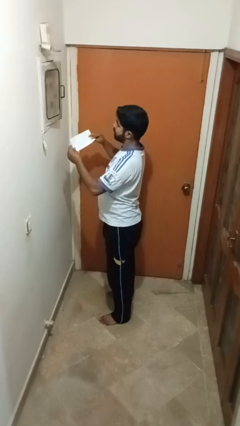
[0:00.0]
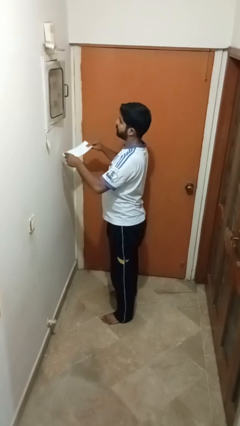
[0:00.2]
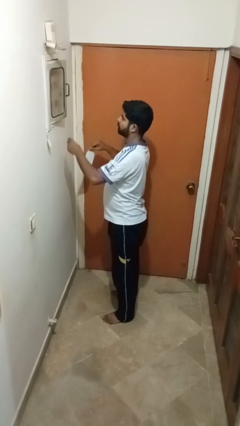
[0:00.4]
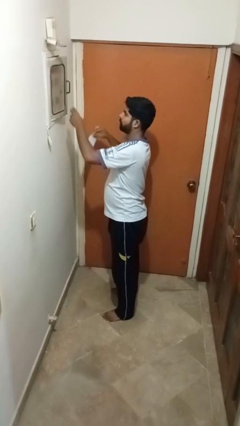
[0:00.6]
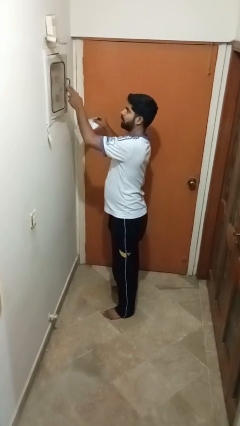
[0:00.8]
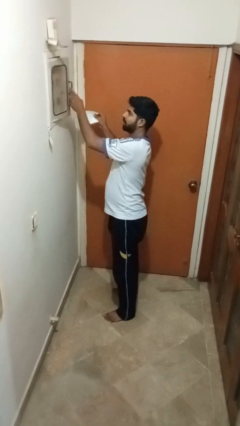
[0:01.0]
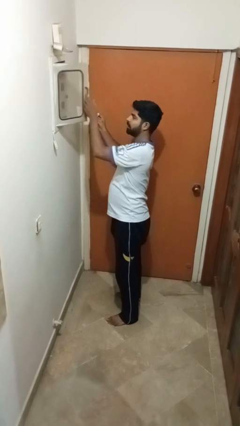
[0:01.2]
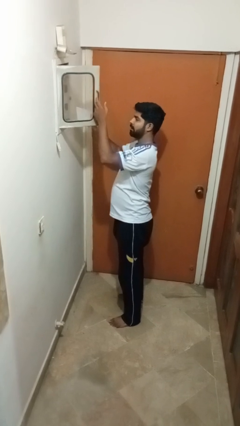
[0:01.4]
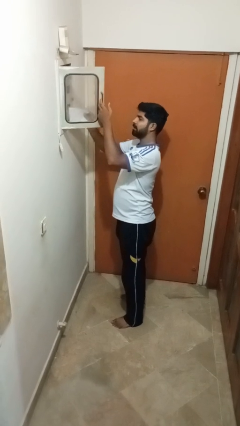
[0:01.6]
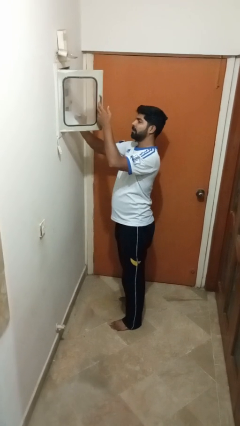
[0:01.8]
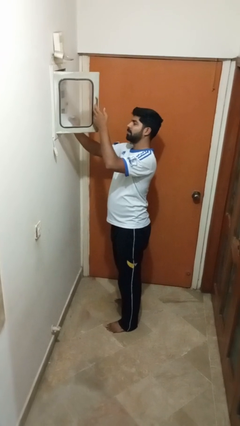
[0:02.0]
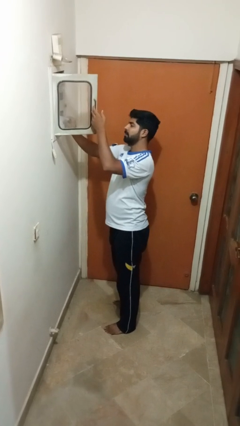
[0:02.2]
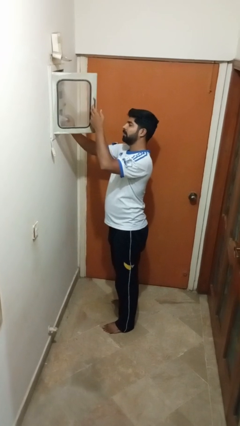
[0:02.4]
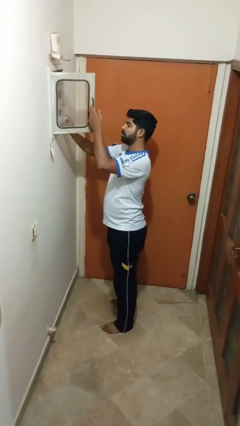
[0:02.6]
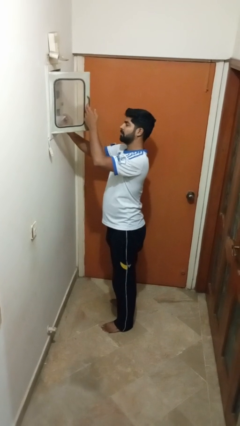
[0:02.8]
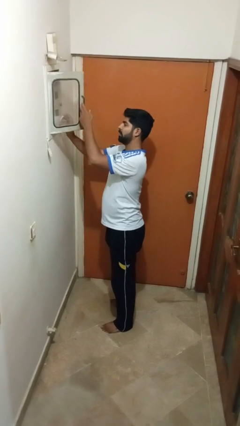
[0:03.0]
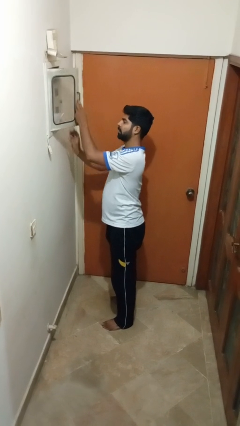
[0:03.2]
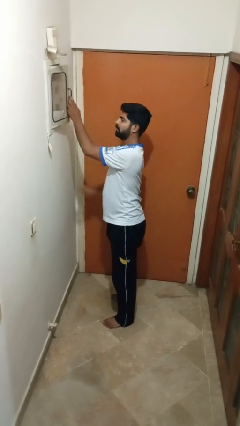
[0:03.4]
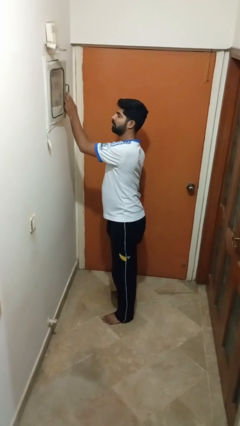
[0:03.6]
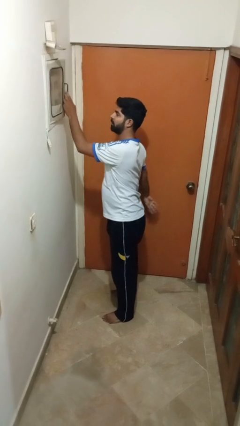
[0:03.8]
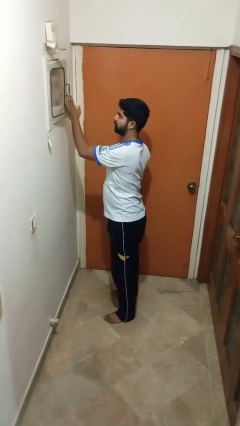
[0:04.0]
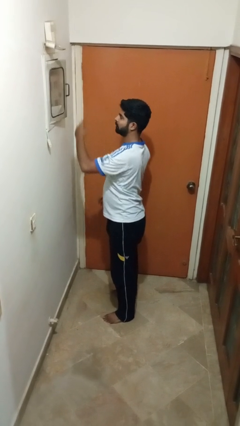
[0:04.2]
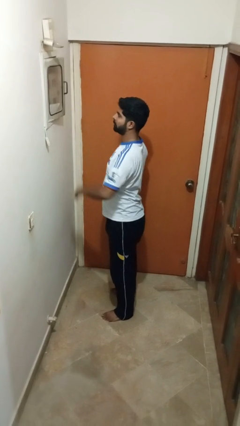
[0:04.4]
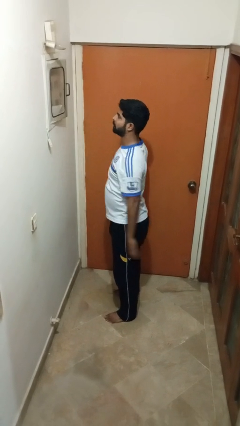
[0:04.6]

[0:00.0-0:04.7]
person puts letters in mailbox

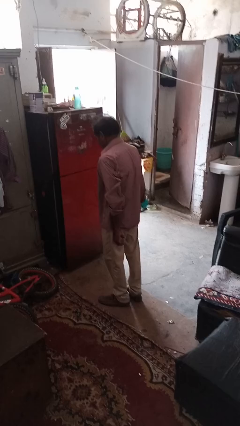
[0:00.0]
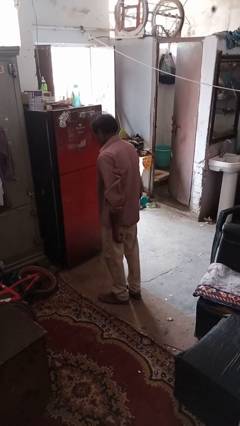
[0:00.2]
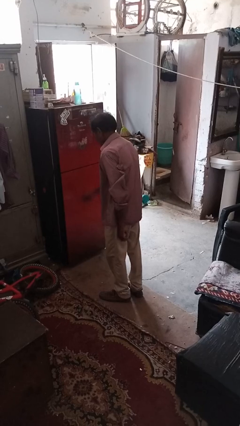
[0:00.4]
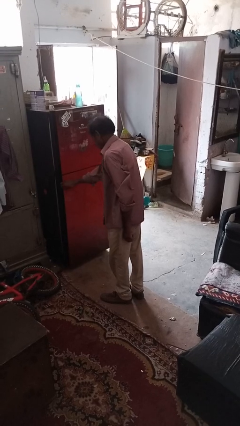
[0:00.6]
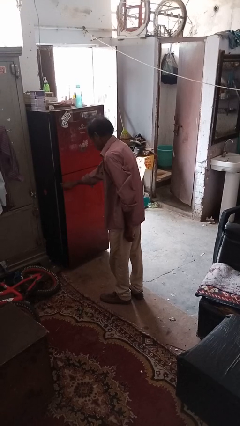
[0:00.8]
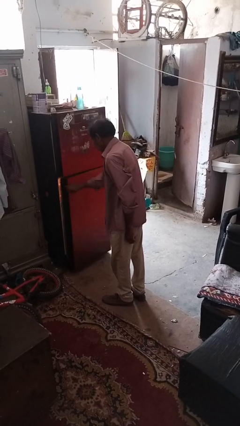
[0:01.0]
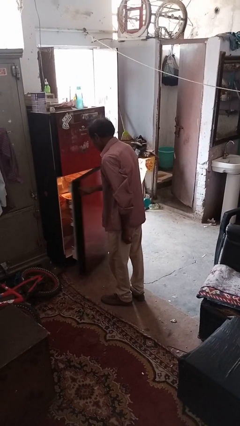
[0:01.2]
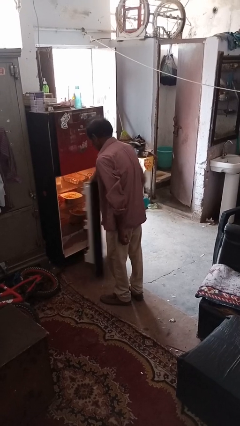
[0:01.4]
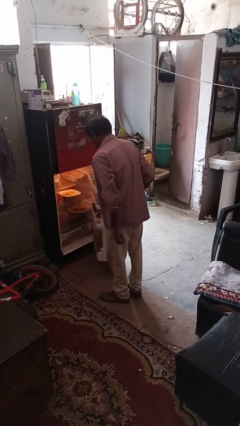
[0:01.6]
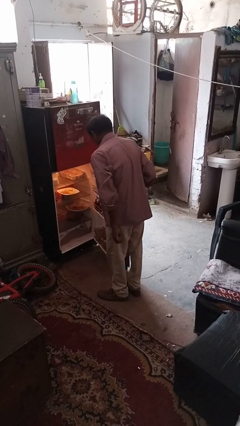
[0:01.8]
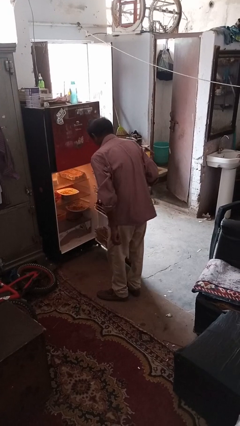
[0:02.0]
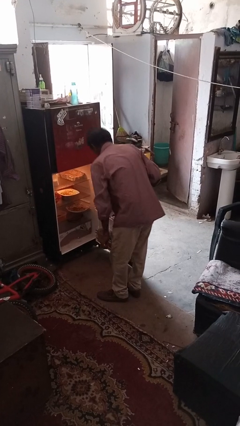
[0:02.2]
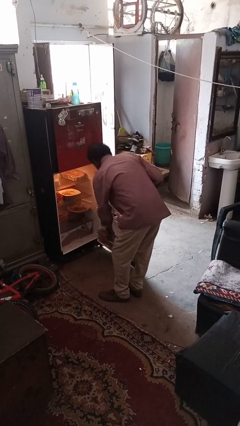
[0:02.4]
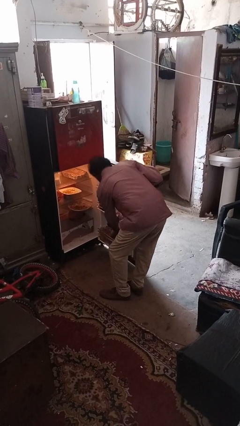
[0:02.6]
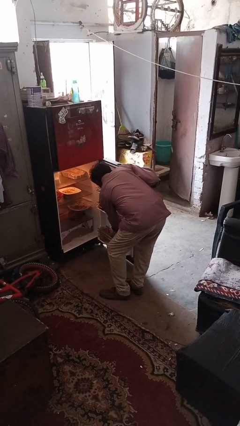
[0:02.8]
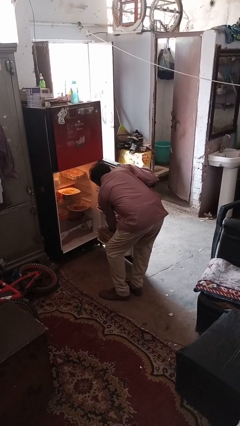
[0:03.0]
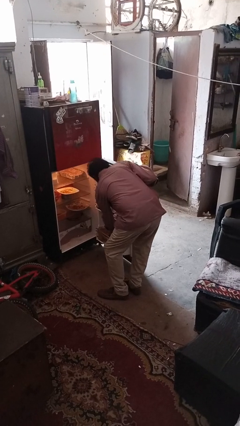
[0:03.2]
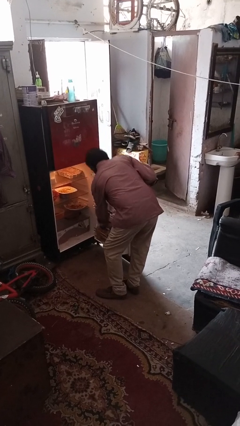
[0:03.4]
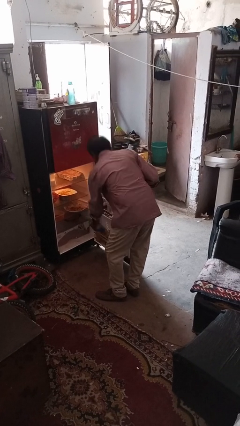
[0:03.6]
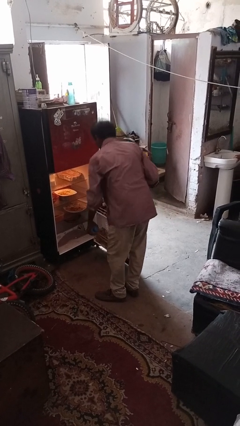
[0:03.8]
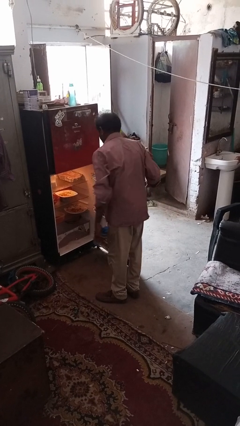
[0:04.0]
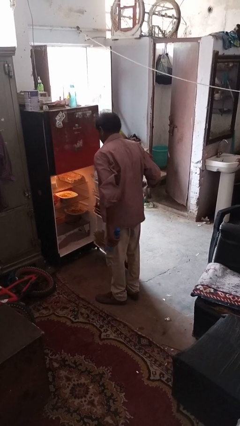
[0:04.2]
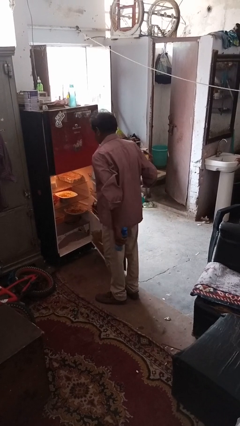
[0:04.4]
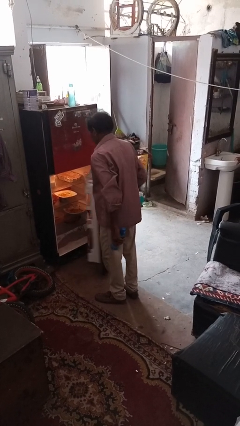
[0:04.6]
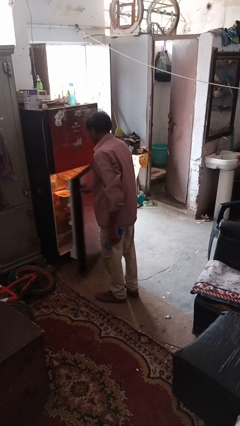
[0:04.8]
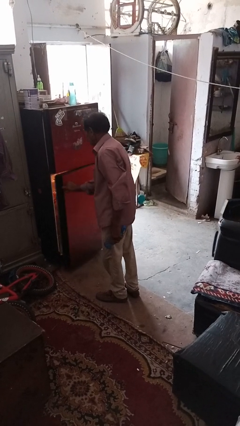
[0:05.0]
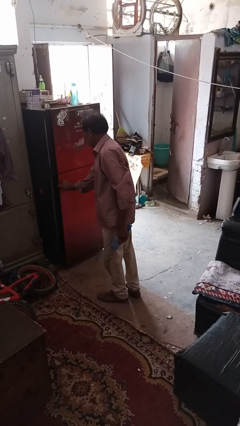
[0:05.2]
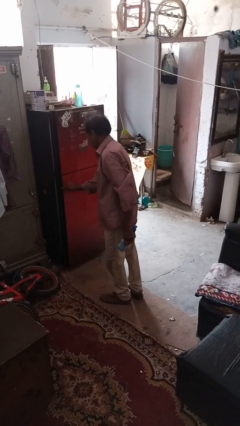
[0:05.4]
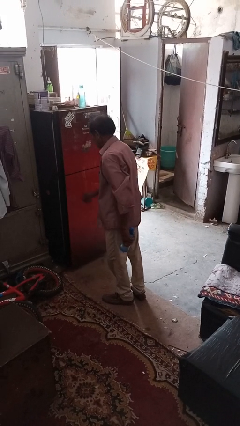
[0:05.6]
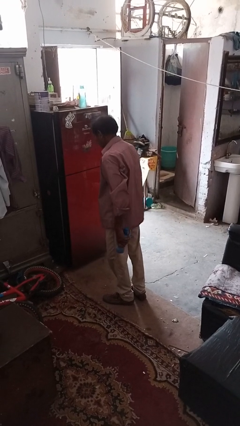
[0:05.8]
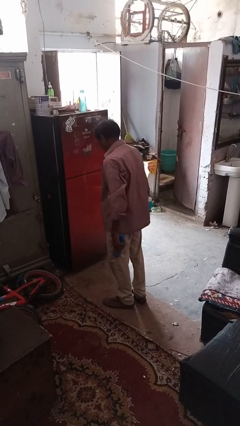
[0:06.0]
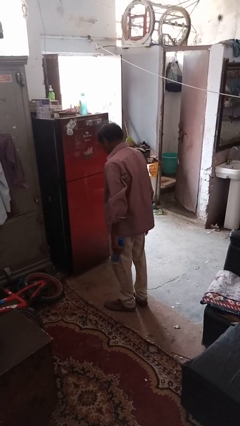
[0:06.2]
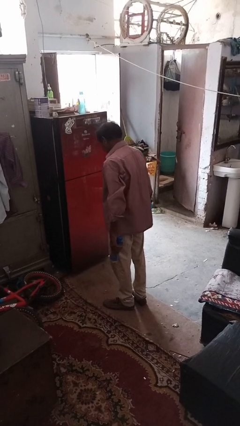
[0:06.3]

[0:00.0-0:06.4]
person takes object from refrigerator

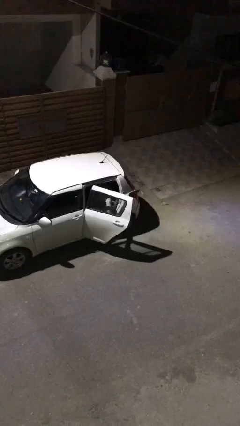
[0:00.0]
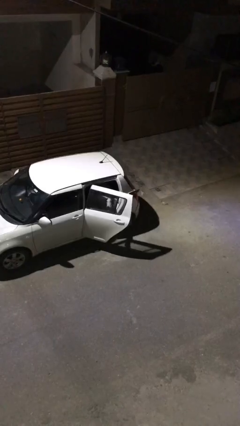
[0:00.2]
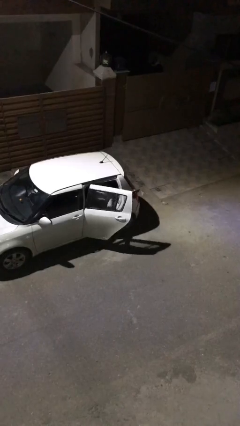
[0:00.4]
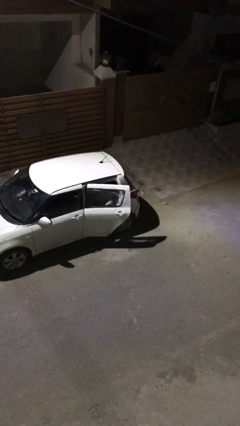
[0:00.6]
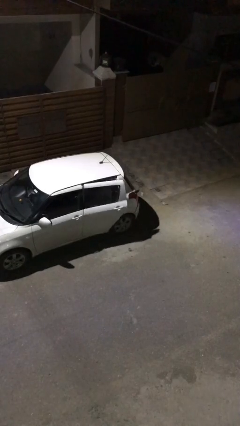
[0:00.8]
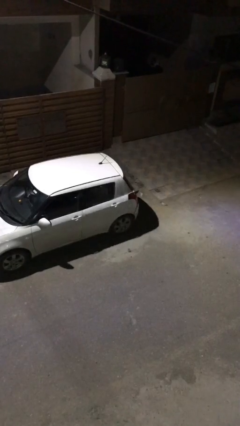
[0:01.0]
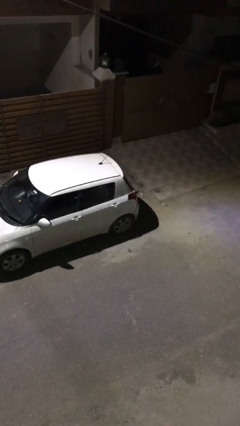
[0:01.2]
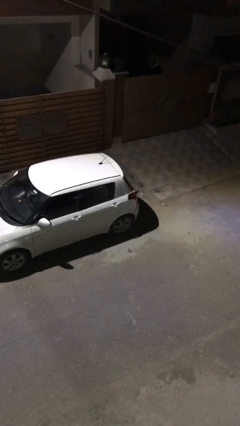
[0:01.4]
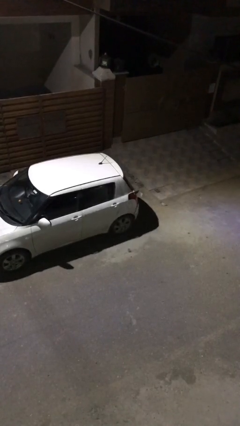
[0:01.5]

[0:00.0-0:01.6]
person closes car door

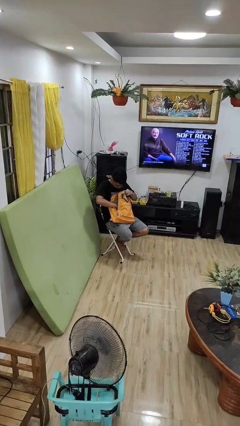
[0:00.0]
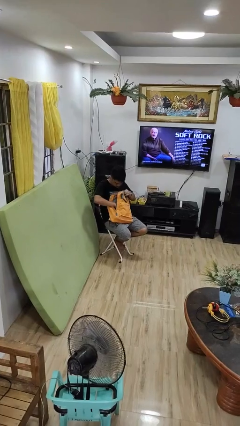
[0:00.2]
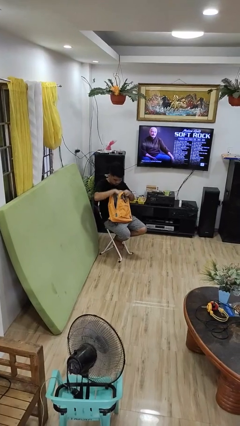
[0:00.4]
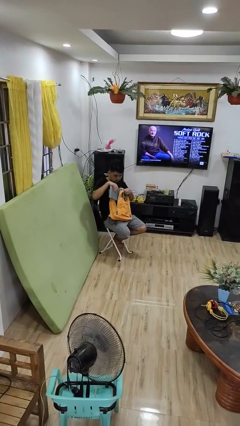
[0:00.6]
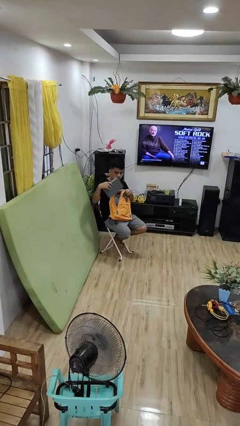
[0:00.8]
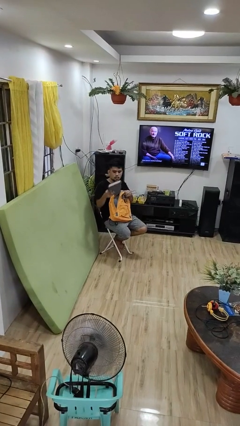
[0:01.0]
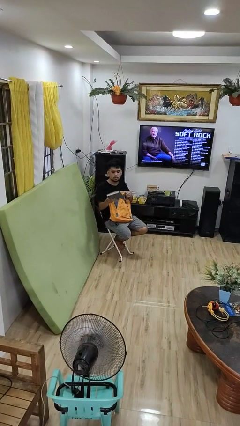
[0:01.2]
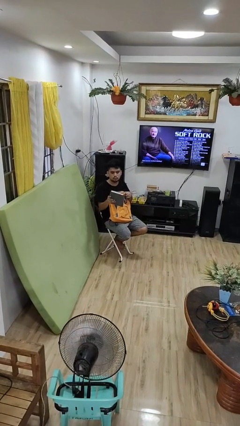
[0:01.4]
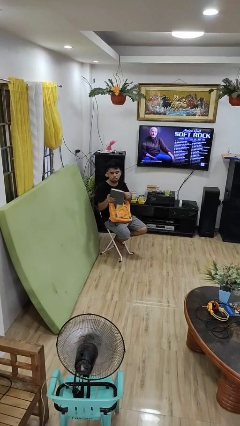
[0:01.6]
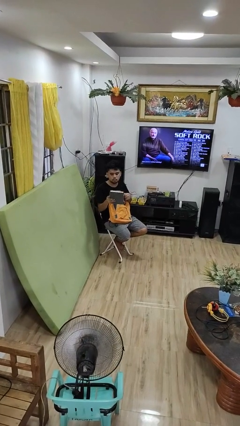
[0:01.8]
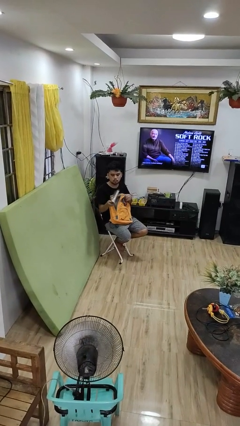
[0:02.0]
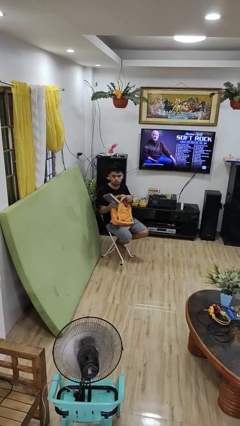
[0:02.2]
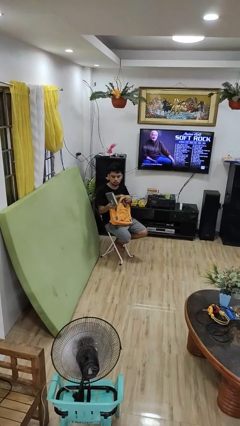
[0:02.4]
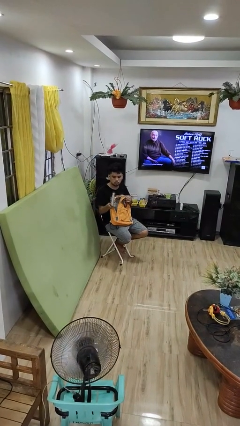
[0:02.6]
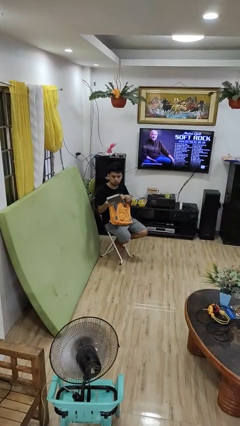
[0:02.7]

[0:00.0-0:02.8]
person takes object from backpack

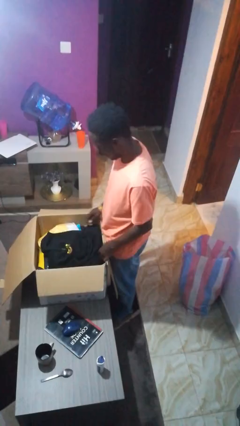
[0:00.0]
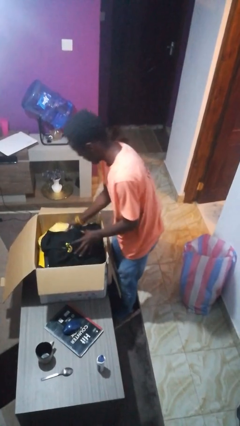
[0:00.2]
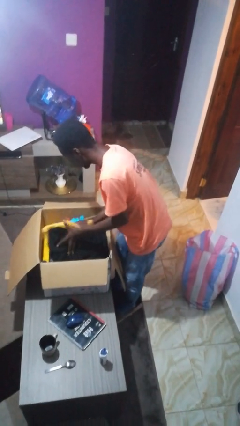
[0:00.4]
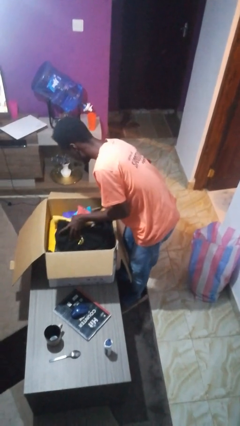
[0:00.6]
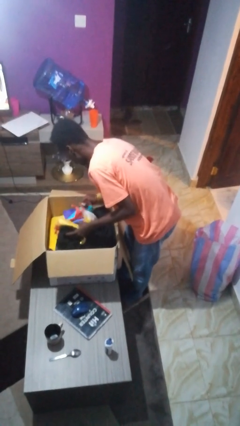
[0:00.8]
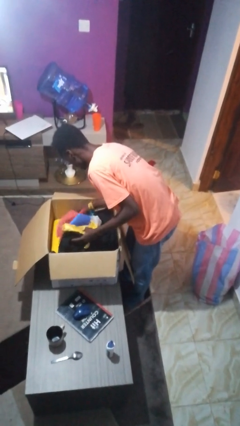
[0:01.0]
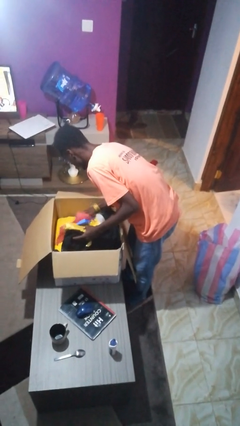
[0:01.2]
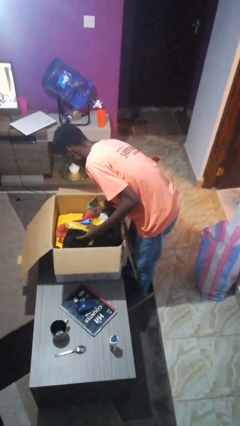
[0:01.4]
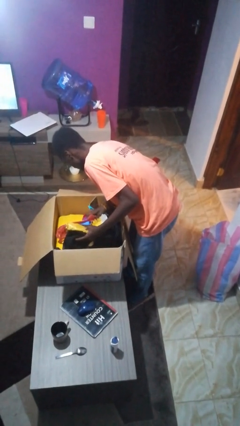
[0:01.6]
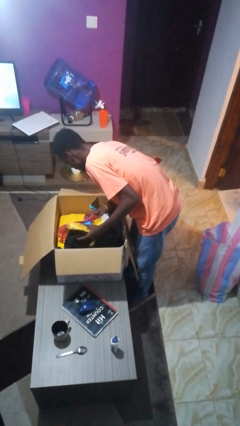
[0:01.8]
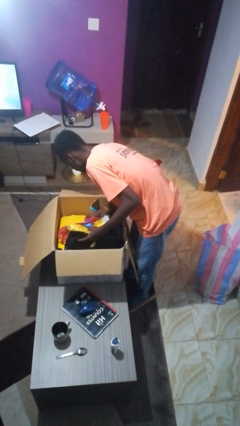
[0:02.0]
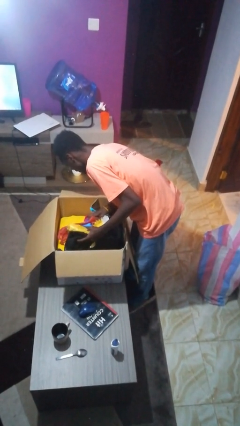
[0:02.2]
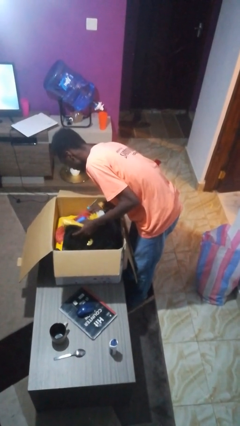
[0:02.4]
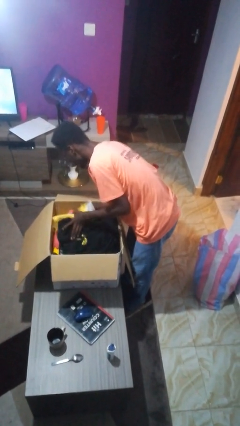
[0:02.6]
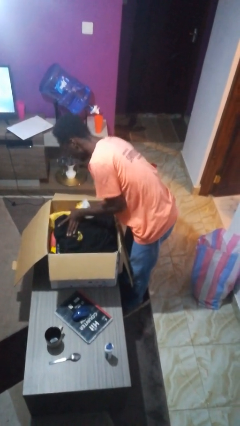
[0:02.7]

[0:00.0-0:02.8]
person searches in box
